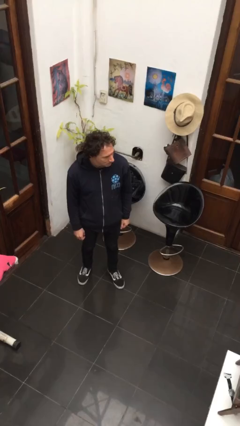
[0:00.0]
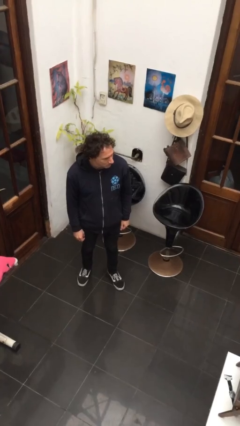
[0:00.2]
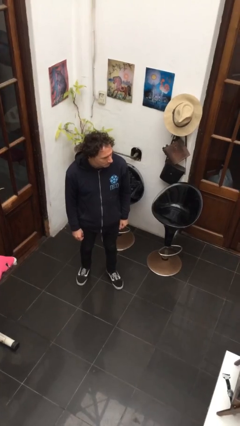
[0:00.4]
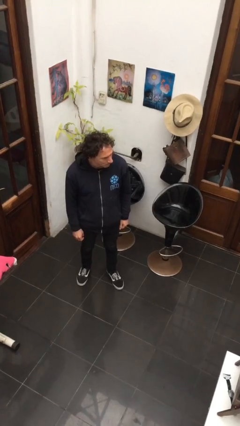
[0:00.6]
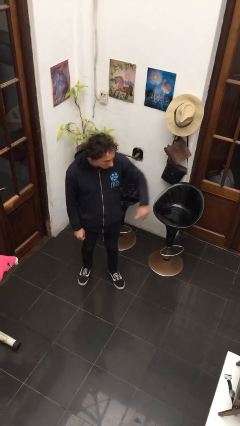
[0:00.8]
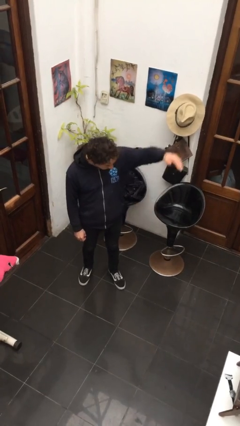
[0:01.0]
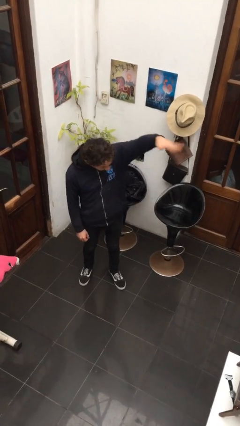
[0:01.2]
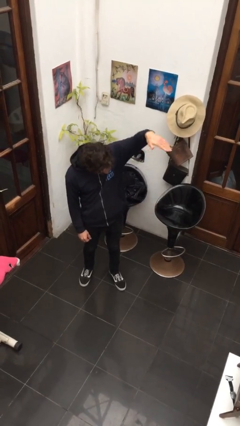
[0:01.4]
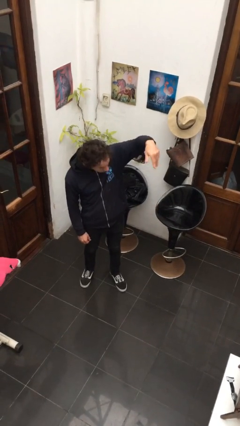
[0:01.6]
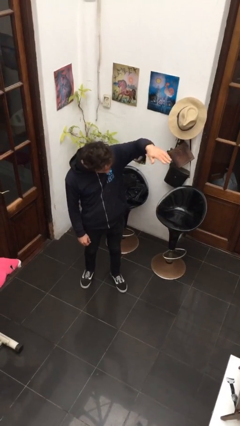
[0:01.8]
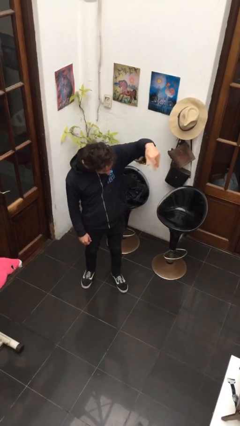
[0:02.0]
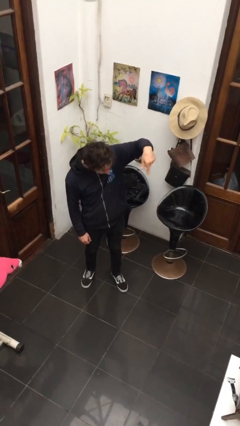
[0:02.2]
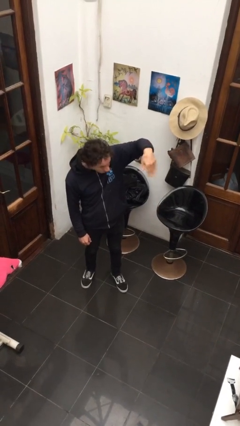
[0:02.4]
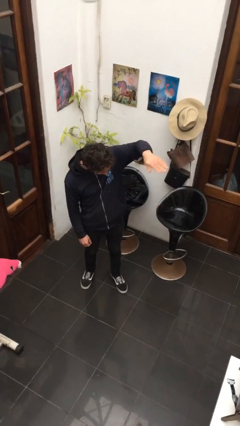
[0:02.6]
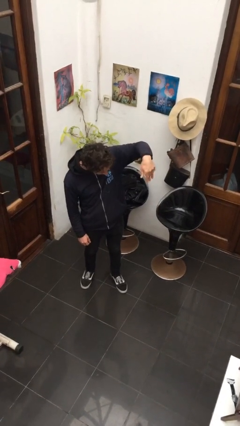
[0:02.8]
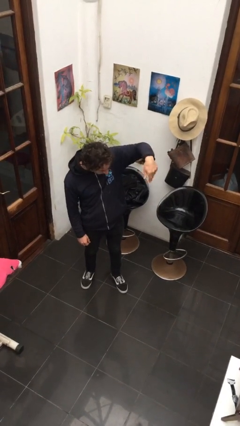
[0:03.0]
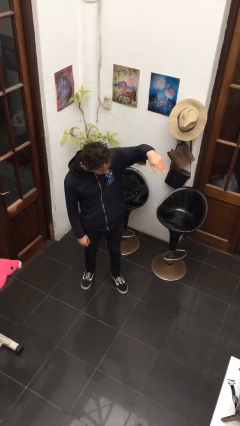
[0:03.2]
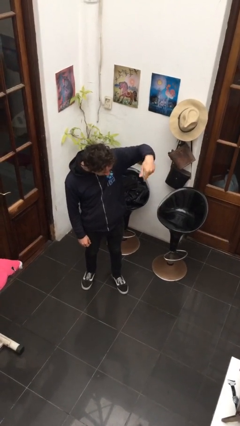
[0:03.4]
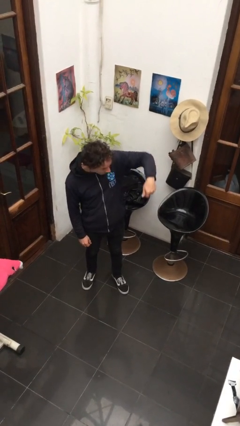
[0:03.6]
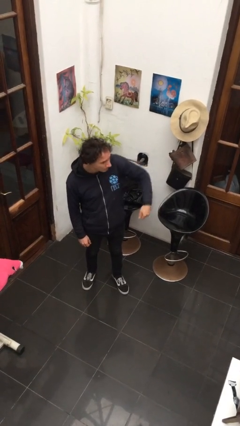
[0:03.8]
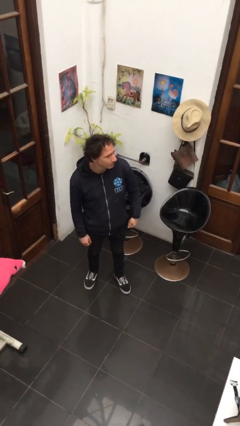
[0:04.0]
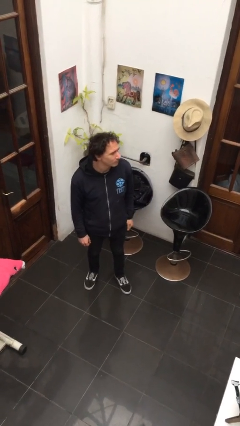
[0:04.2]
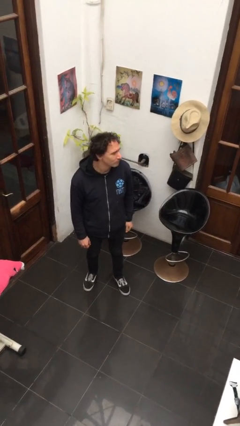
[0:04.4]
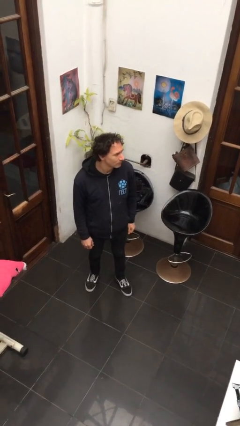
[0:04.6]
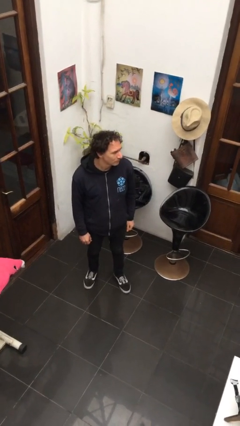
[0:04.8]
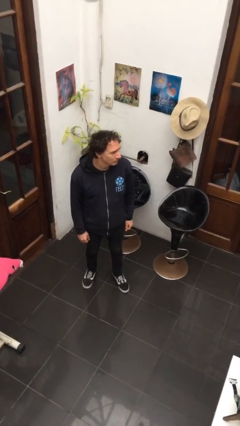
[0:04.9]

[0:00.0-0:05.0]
person gestures come here

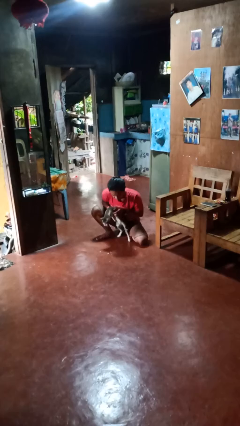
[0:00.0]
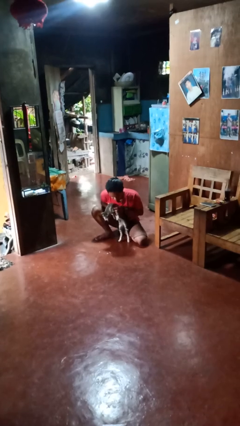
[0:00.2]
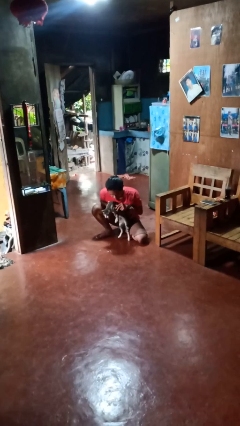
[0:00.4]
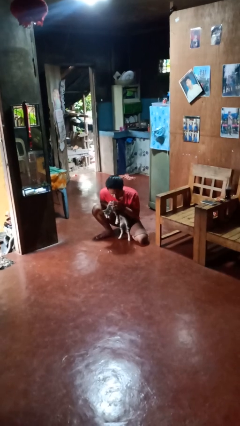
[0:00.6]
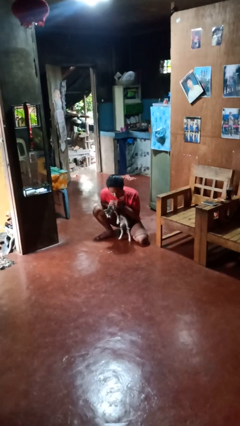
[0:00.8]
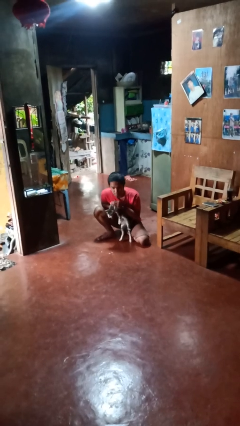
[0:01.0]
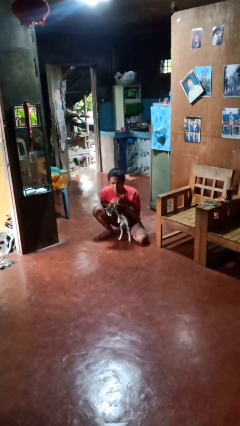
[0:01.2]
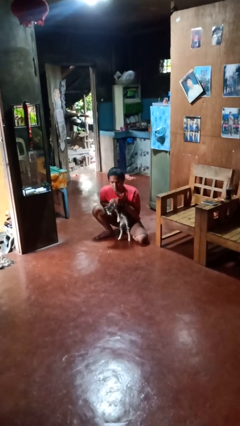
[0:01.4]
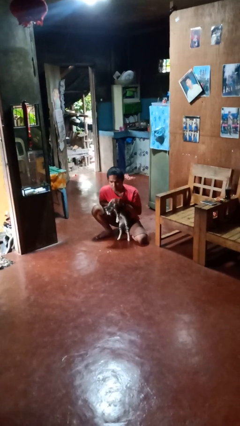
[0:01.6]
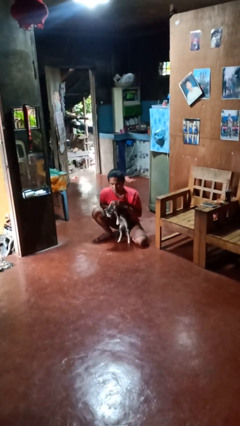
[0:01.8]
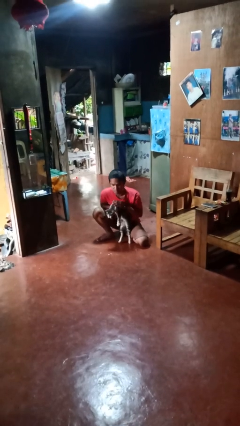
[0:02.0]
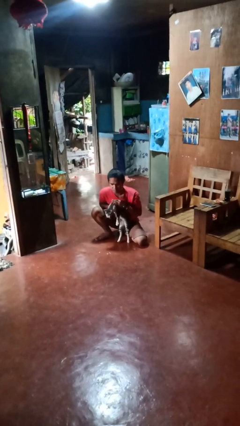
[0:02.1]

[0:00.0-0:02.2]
person hugs cat

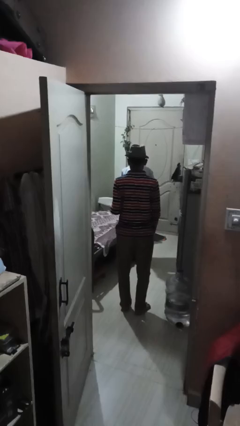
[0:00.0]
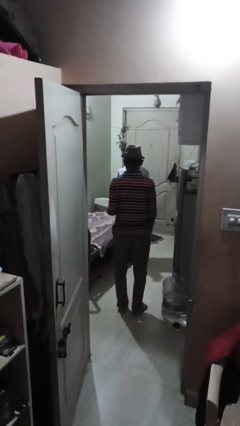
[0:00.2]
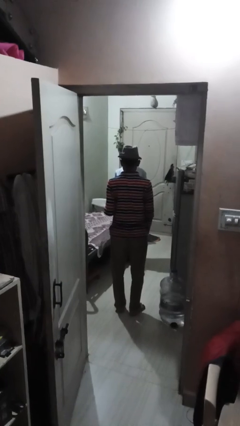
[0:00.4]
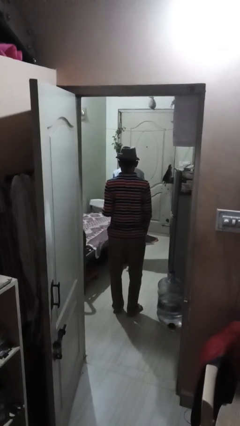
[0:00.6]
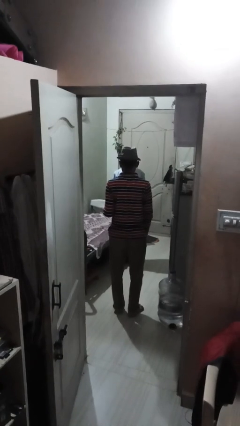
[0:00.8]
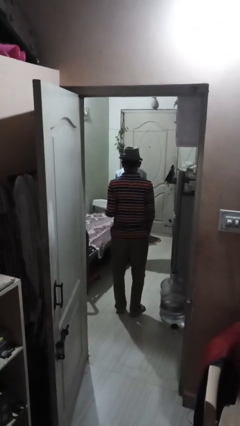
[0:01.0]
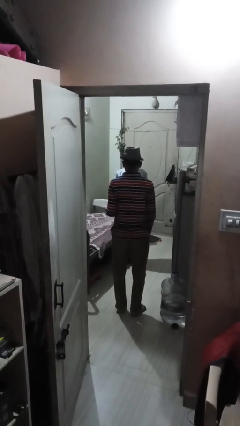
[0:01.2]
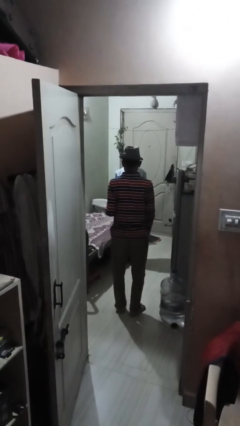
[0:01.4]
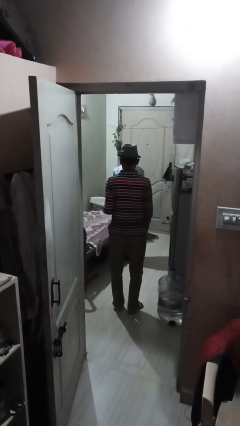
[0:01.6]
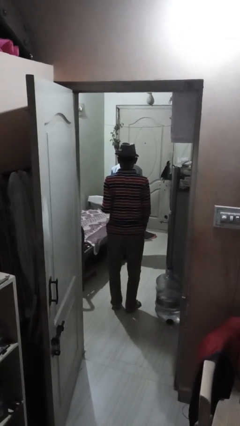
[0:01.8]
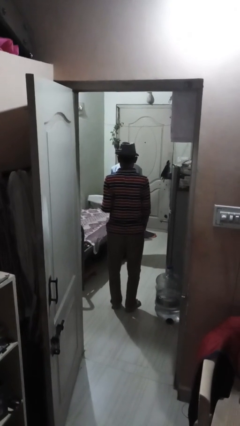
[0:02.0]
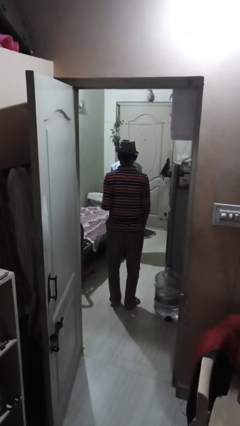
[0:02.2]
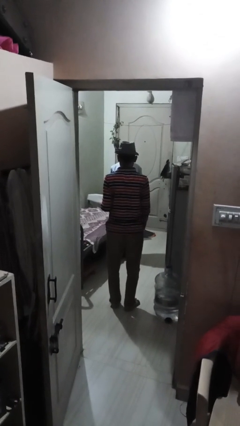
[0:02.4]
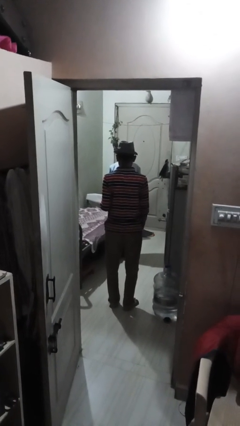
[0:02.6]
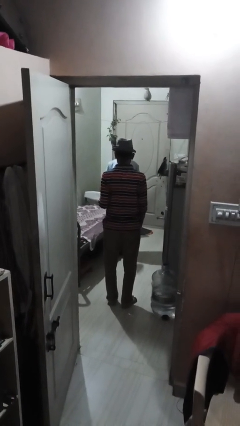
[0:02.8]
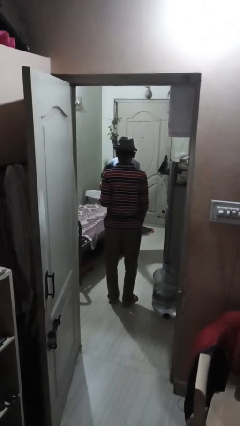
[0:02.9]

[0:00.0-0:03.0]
person throws object to person

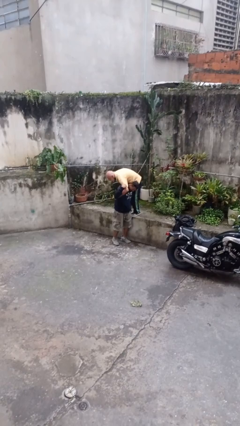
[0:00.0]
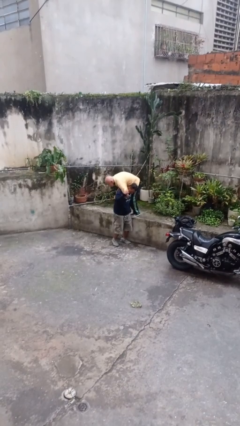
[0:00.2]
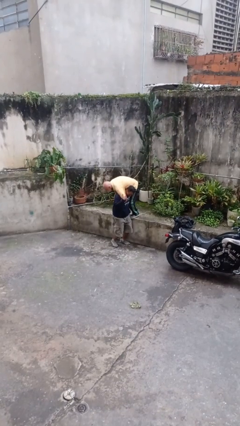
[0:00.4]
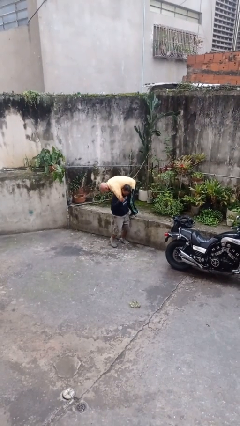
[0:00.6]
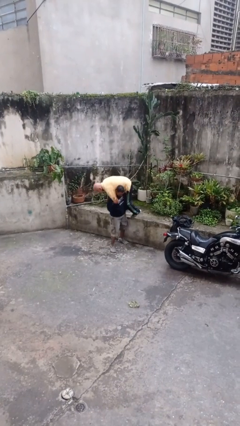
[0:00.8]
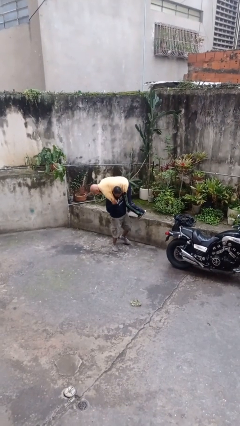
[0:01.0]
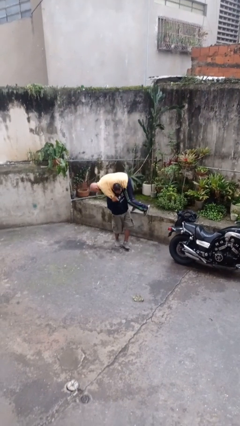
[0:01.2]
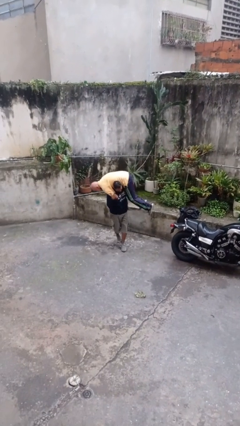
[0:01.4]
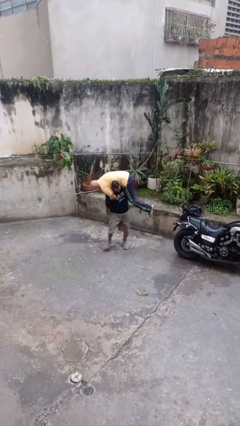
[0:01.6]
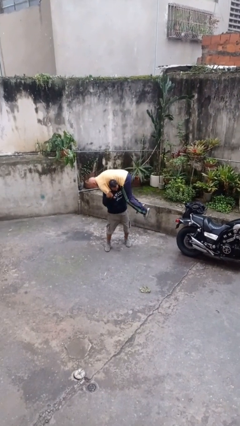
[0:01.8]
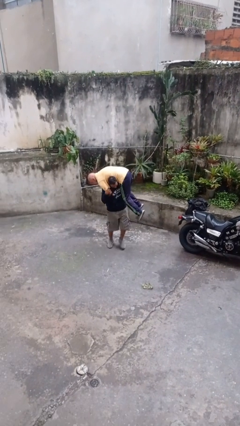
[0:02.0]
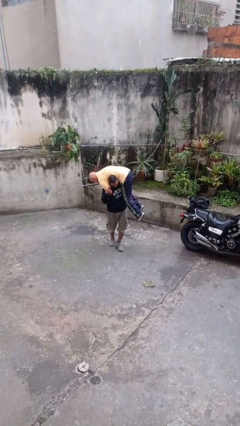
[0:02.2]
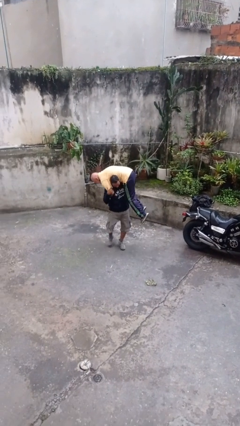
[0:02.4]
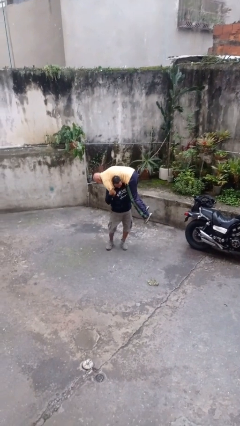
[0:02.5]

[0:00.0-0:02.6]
person carries person over shoulder

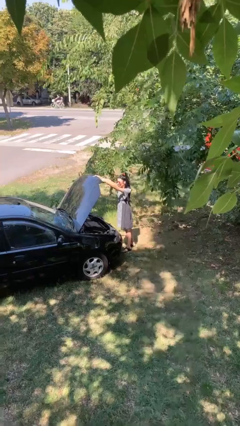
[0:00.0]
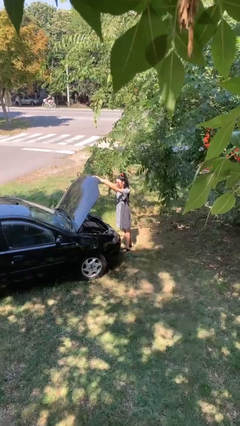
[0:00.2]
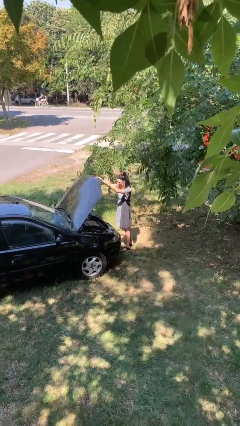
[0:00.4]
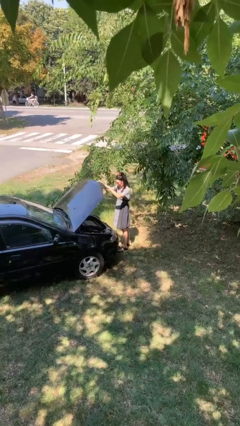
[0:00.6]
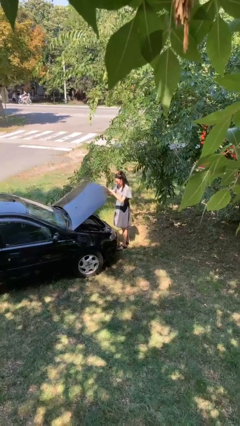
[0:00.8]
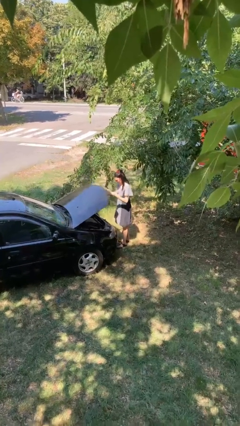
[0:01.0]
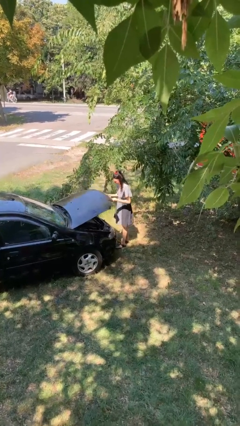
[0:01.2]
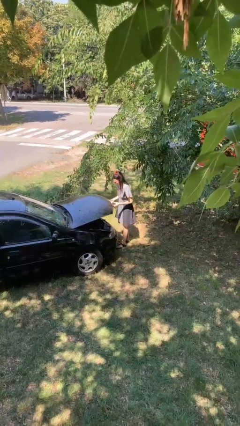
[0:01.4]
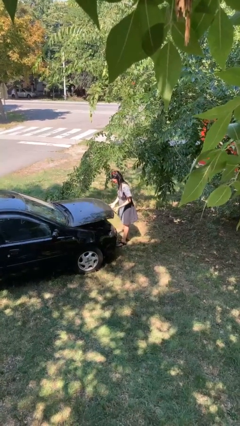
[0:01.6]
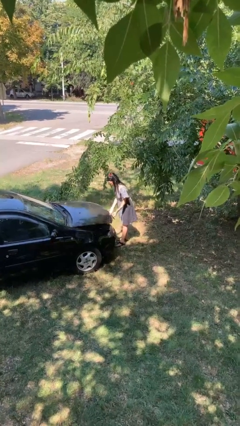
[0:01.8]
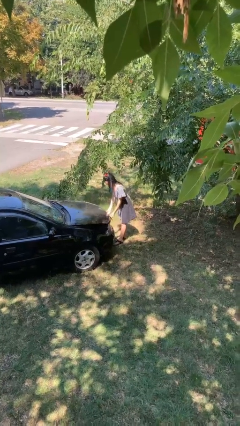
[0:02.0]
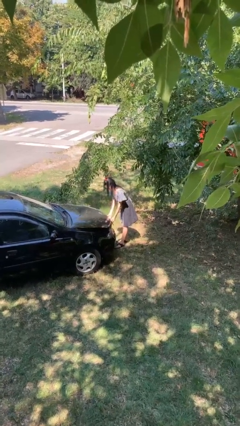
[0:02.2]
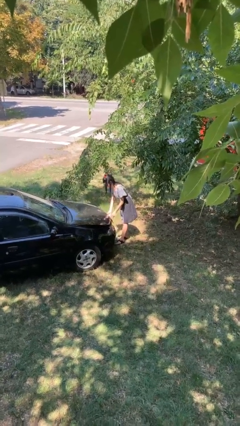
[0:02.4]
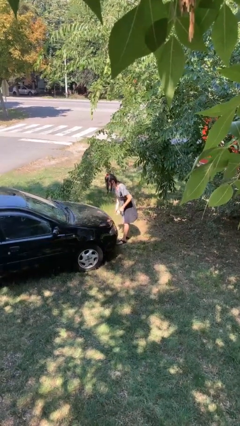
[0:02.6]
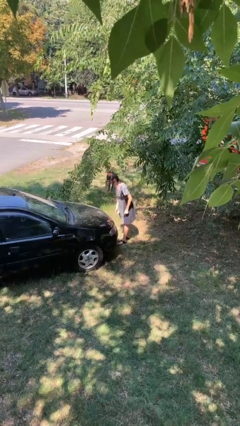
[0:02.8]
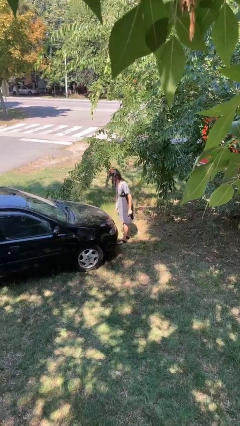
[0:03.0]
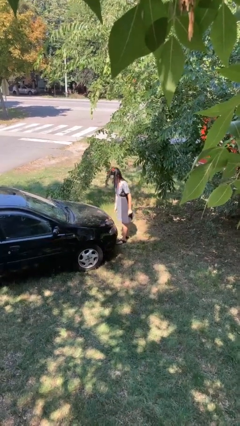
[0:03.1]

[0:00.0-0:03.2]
person closes car hood

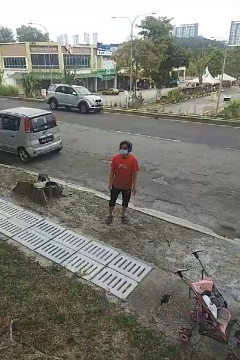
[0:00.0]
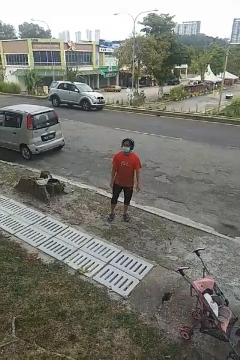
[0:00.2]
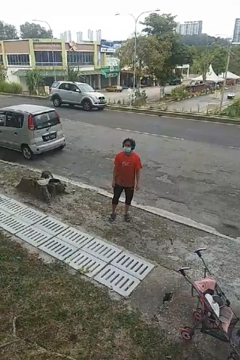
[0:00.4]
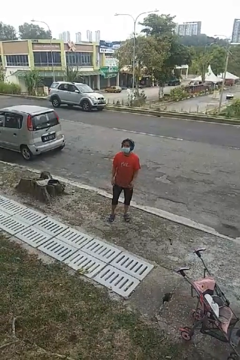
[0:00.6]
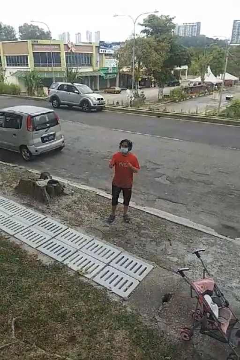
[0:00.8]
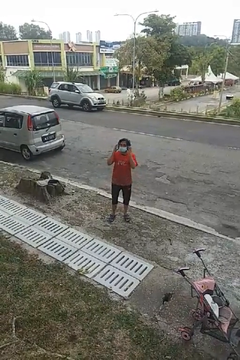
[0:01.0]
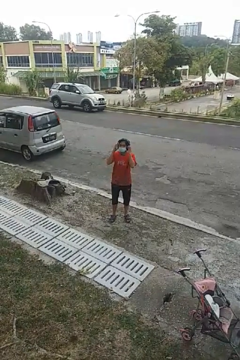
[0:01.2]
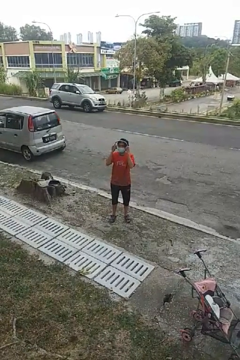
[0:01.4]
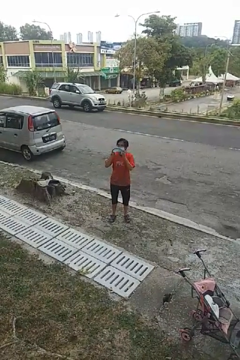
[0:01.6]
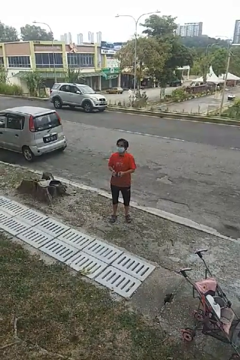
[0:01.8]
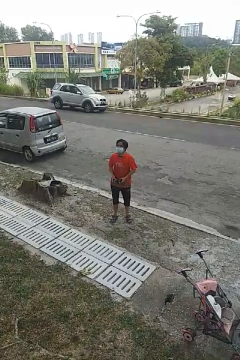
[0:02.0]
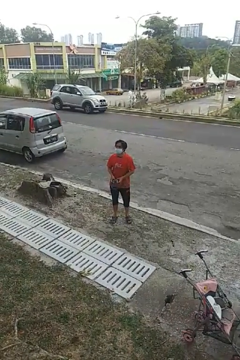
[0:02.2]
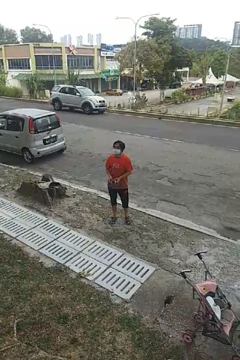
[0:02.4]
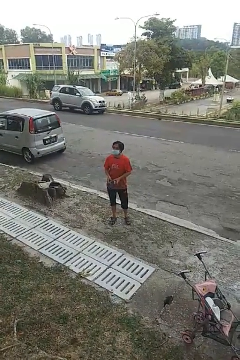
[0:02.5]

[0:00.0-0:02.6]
person takes off headphones
